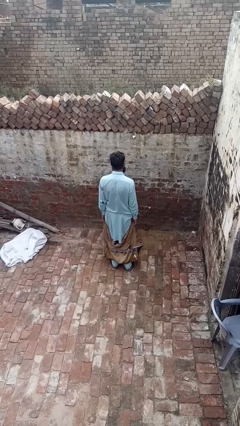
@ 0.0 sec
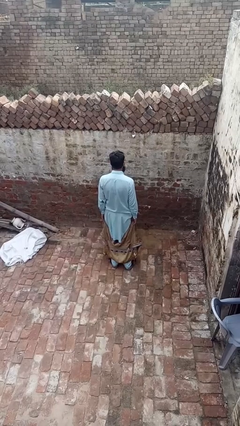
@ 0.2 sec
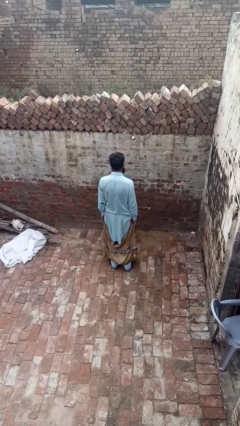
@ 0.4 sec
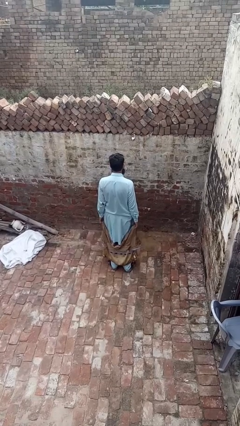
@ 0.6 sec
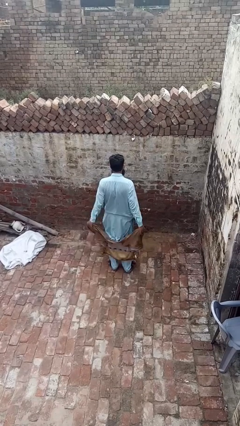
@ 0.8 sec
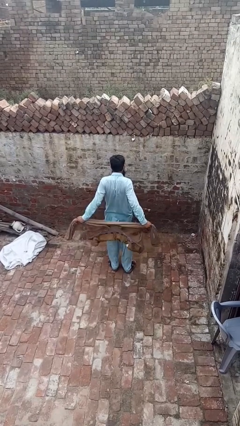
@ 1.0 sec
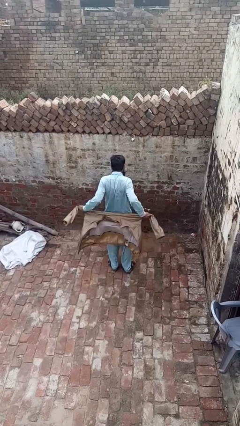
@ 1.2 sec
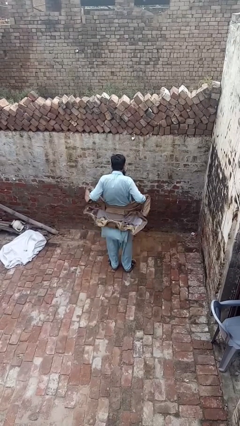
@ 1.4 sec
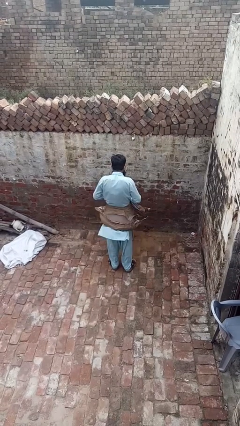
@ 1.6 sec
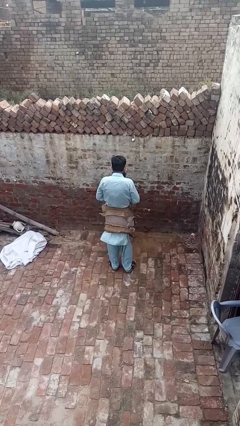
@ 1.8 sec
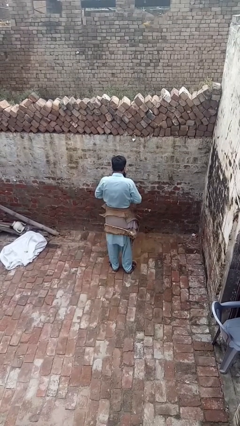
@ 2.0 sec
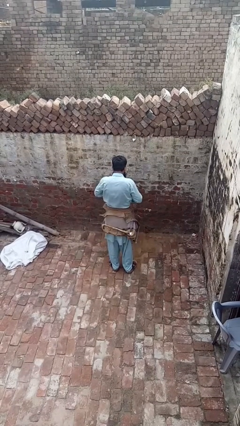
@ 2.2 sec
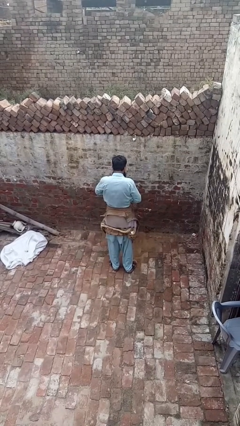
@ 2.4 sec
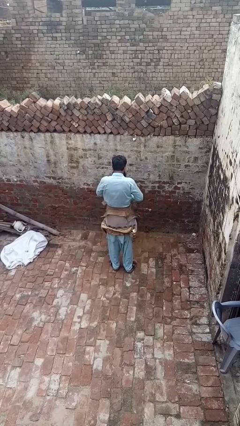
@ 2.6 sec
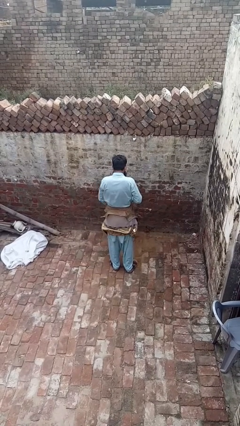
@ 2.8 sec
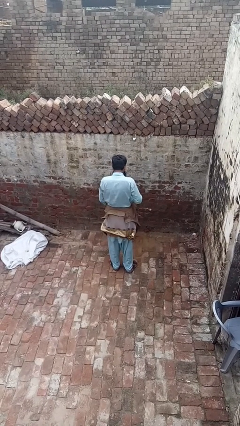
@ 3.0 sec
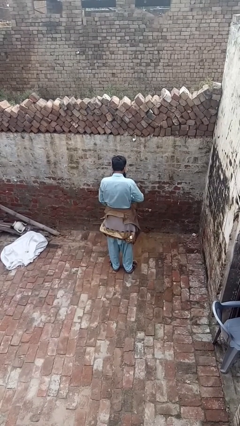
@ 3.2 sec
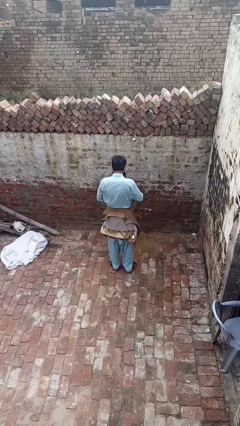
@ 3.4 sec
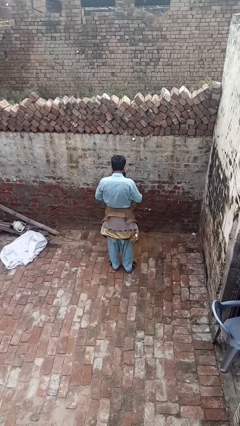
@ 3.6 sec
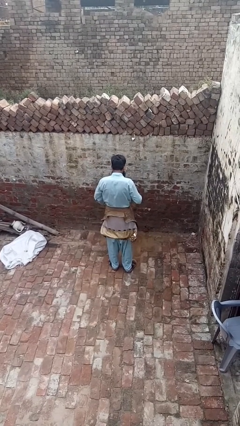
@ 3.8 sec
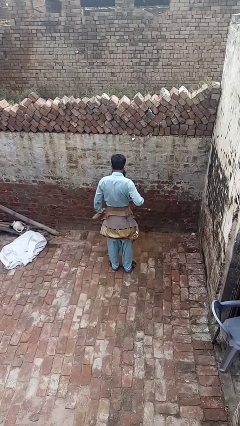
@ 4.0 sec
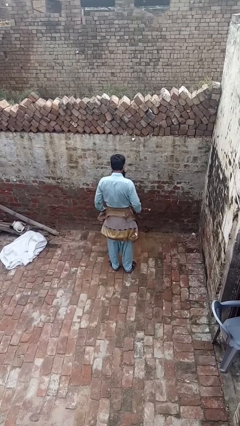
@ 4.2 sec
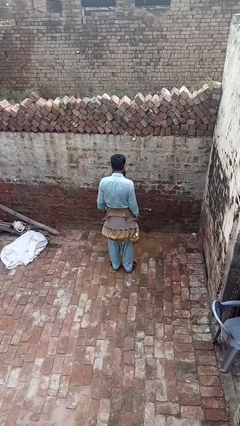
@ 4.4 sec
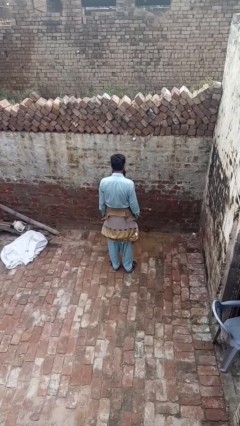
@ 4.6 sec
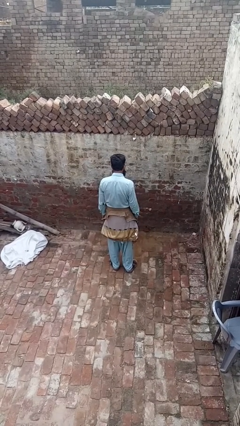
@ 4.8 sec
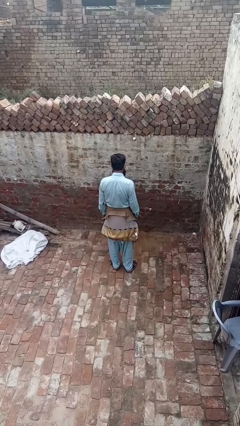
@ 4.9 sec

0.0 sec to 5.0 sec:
person ties jacket around waist

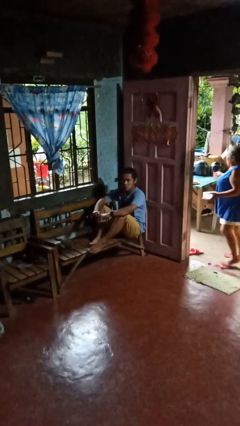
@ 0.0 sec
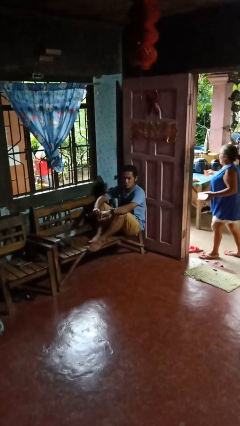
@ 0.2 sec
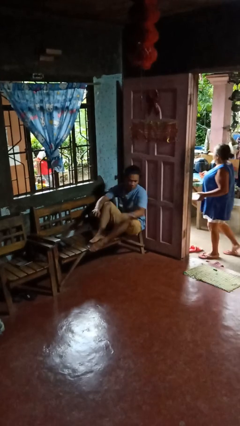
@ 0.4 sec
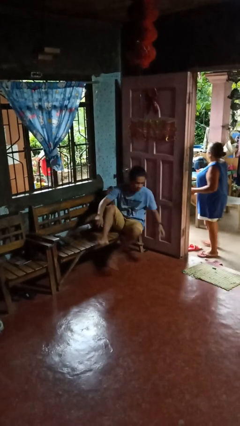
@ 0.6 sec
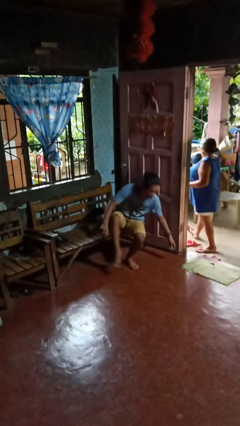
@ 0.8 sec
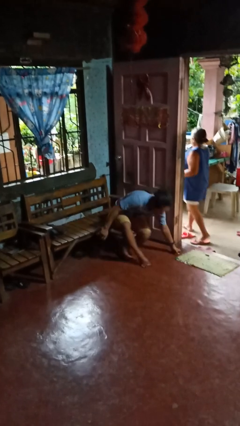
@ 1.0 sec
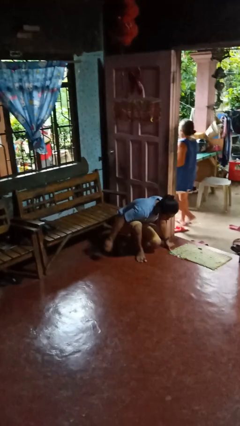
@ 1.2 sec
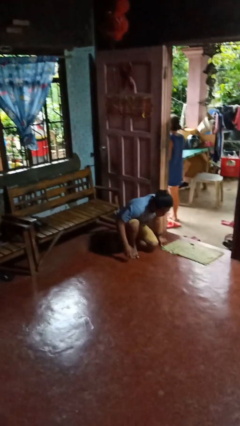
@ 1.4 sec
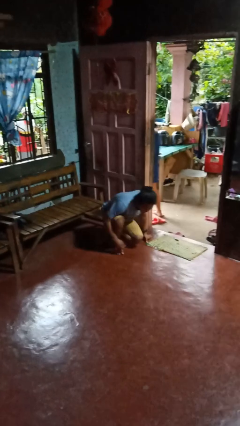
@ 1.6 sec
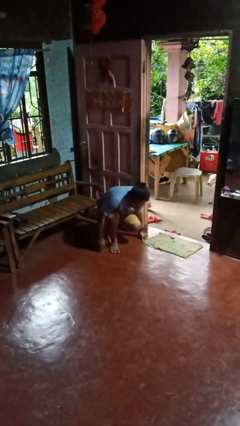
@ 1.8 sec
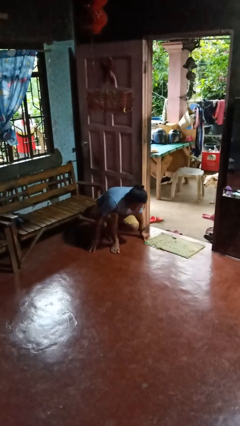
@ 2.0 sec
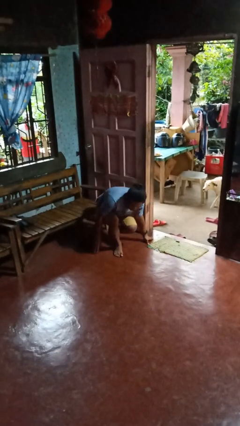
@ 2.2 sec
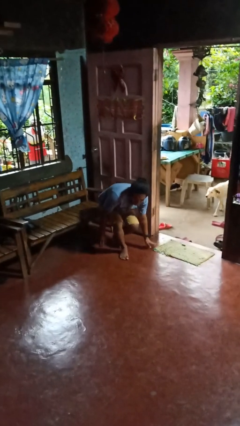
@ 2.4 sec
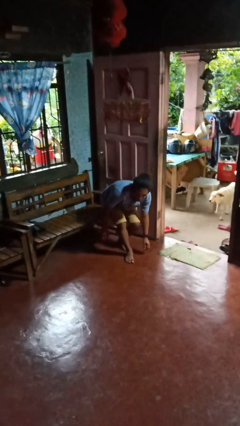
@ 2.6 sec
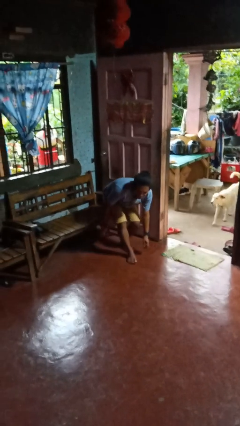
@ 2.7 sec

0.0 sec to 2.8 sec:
person falls from chair

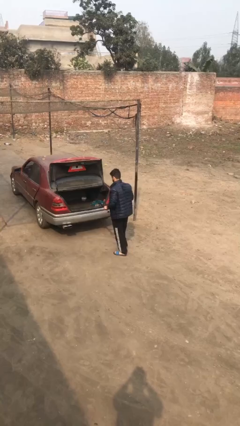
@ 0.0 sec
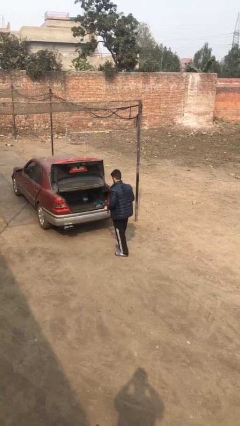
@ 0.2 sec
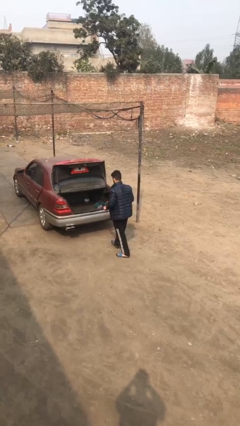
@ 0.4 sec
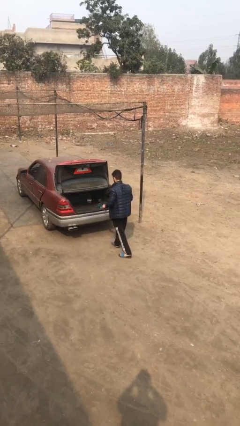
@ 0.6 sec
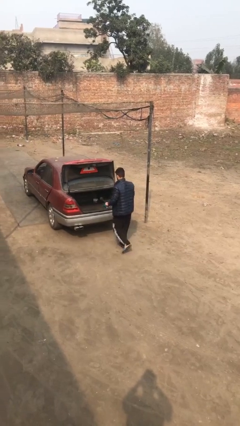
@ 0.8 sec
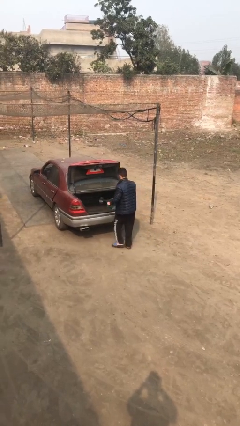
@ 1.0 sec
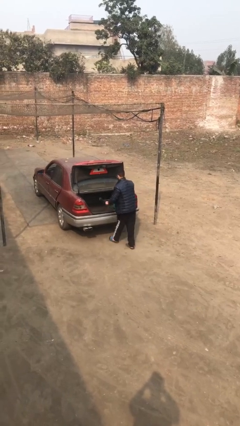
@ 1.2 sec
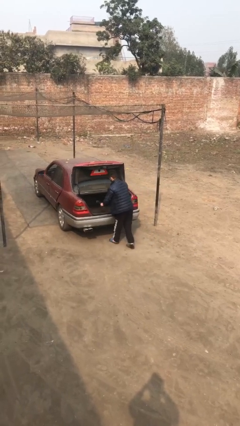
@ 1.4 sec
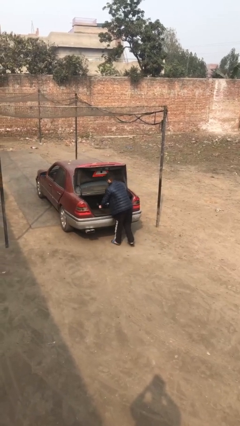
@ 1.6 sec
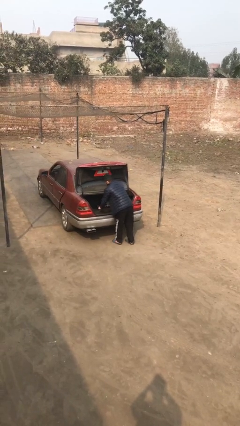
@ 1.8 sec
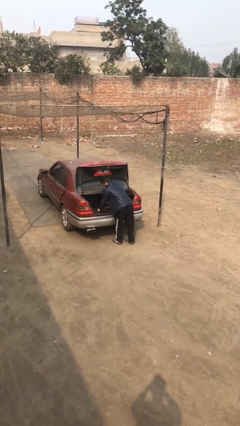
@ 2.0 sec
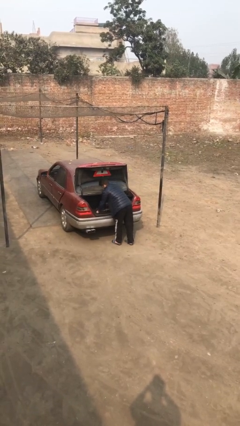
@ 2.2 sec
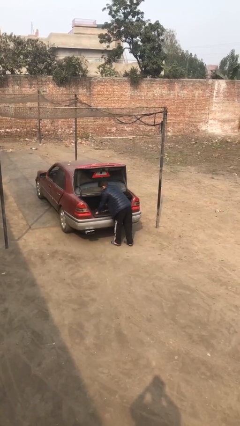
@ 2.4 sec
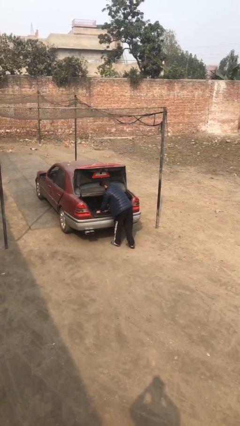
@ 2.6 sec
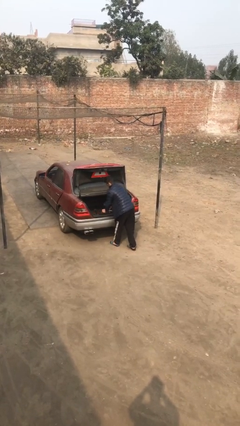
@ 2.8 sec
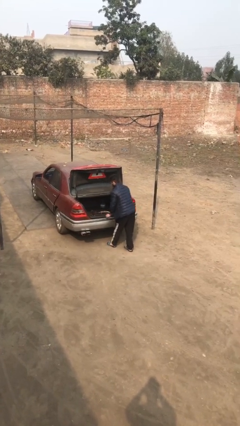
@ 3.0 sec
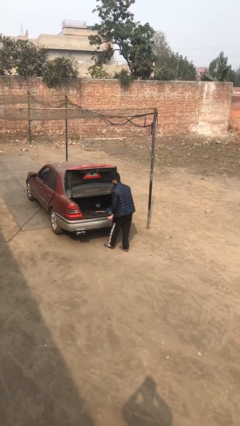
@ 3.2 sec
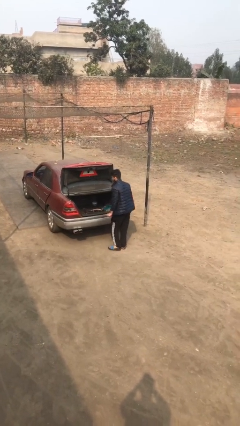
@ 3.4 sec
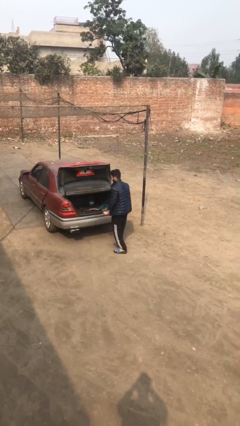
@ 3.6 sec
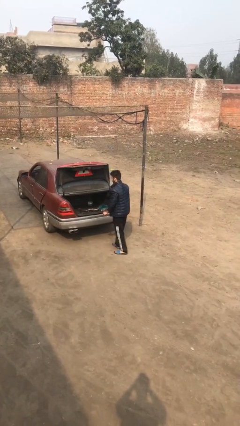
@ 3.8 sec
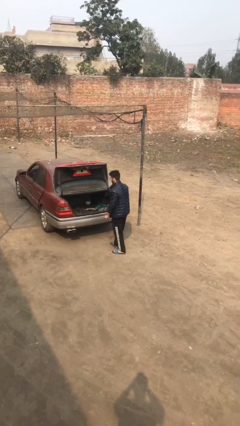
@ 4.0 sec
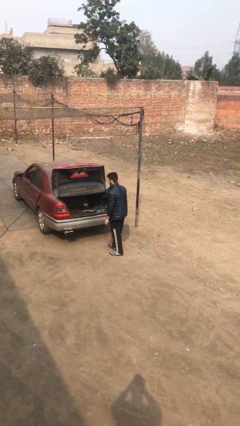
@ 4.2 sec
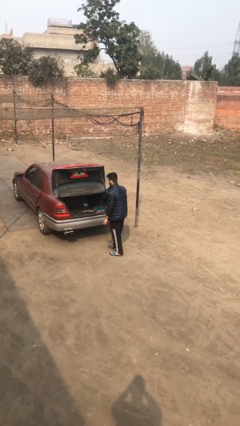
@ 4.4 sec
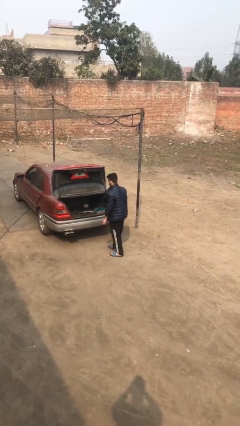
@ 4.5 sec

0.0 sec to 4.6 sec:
person loads car

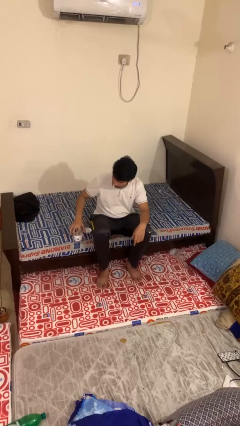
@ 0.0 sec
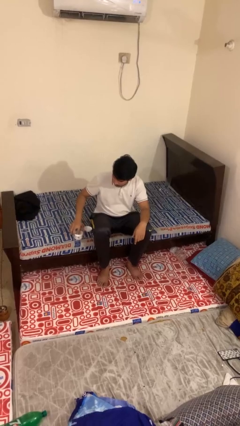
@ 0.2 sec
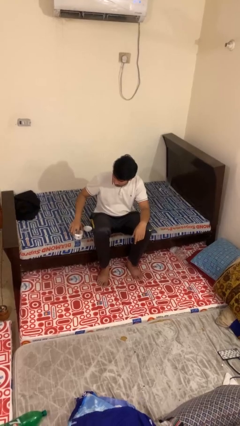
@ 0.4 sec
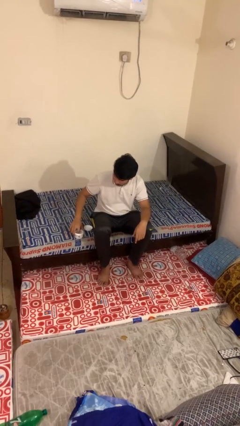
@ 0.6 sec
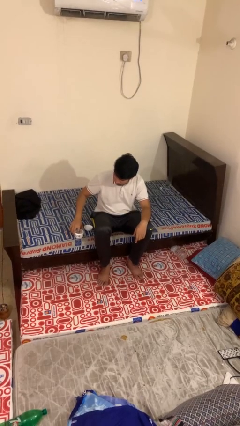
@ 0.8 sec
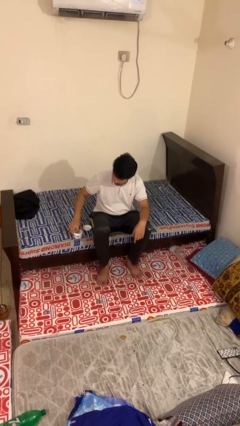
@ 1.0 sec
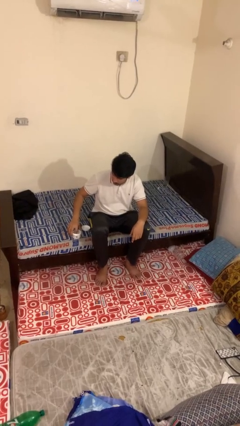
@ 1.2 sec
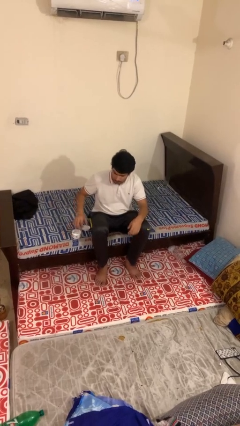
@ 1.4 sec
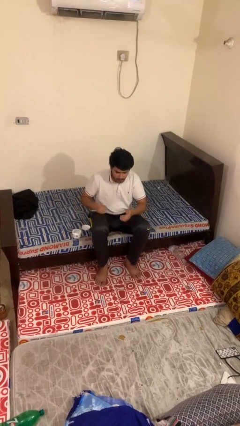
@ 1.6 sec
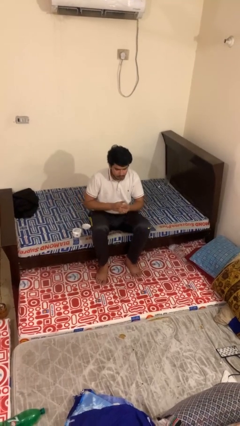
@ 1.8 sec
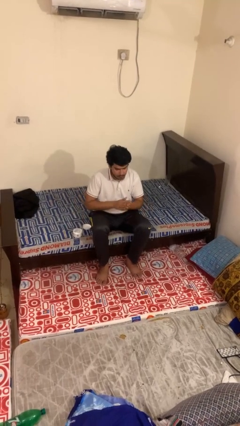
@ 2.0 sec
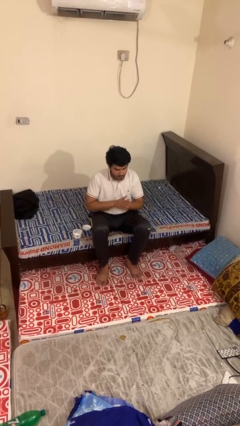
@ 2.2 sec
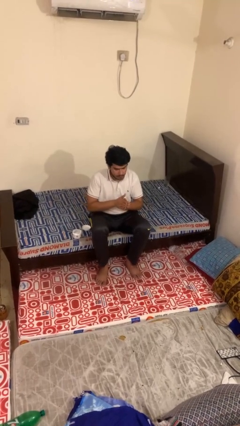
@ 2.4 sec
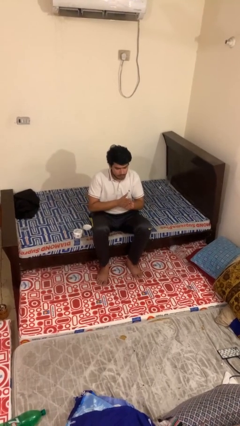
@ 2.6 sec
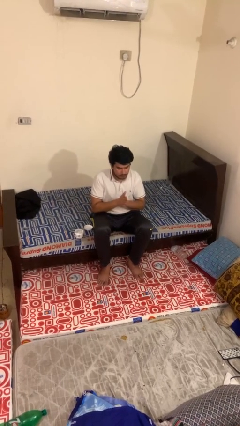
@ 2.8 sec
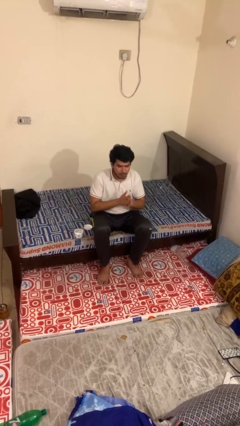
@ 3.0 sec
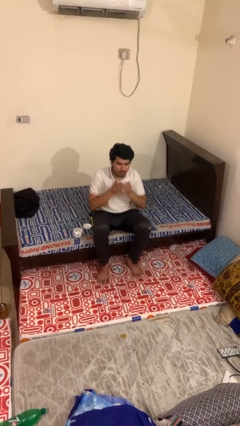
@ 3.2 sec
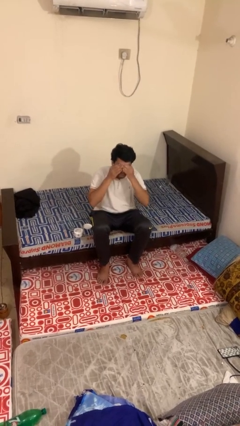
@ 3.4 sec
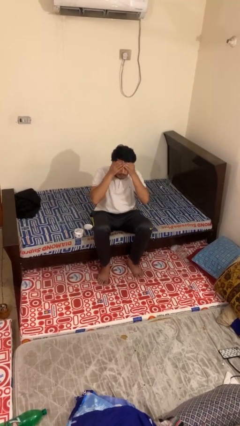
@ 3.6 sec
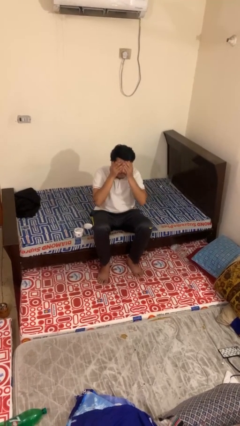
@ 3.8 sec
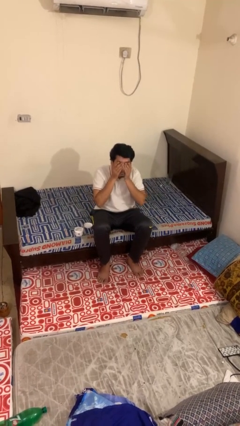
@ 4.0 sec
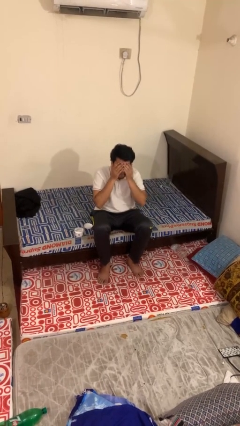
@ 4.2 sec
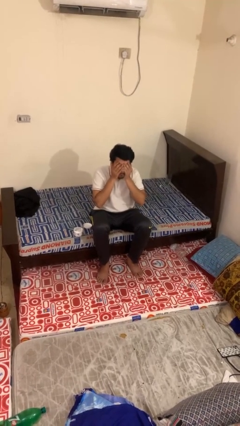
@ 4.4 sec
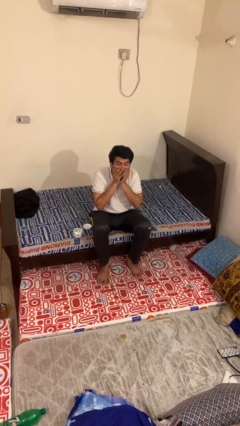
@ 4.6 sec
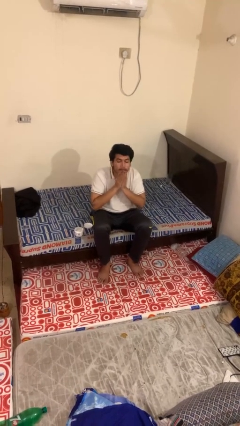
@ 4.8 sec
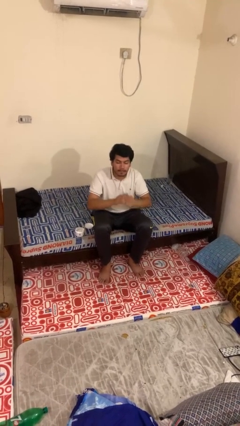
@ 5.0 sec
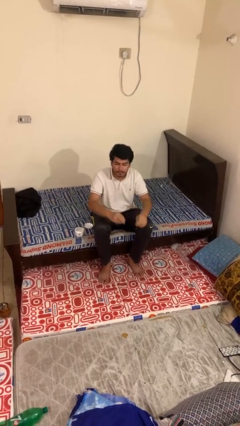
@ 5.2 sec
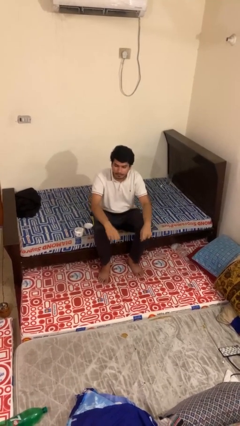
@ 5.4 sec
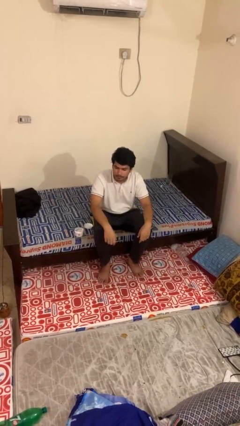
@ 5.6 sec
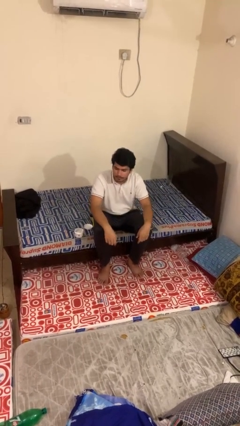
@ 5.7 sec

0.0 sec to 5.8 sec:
person applies facial moisturizer
